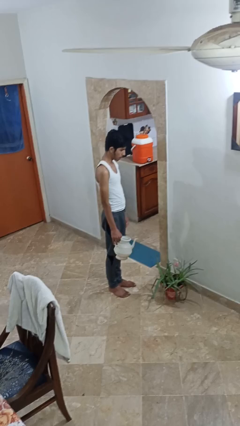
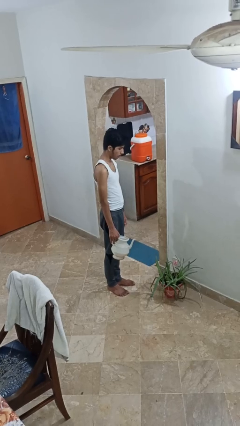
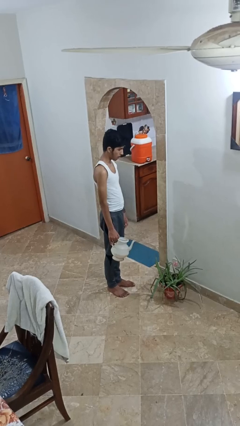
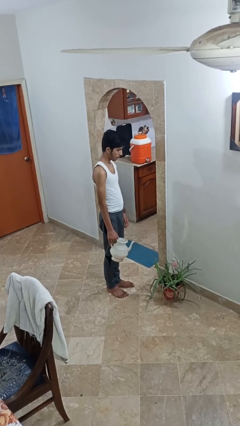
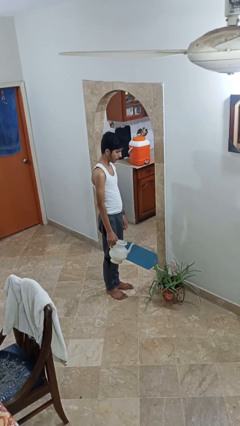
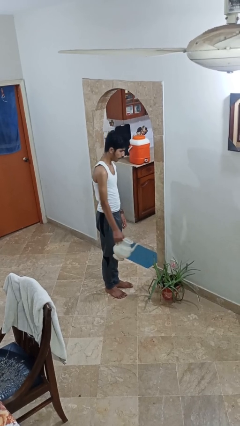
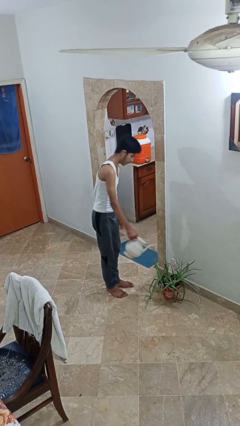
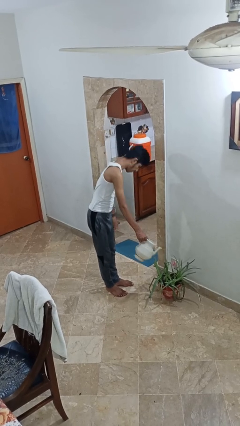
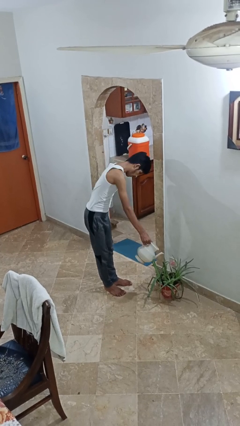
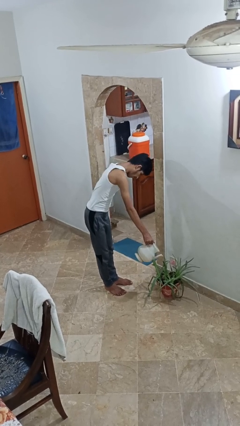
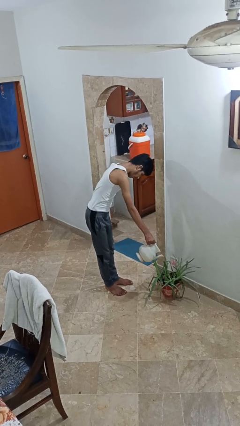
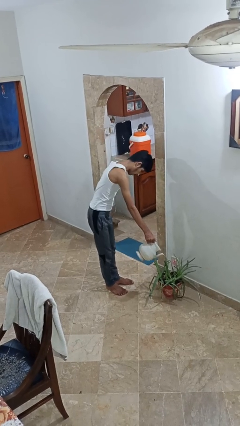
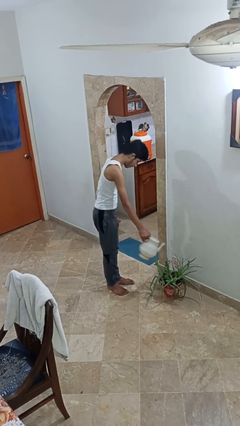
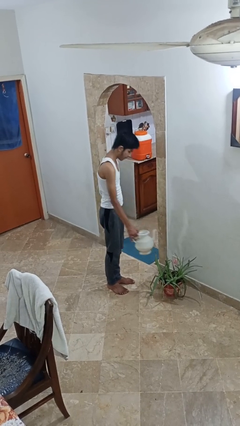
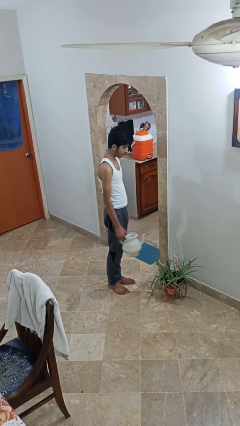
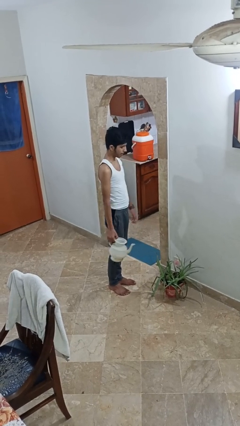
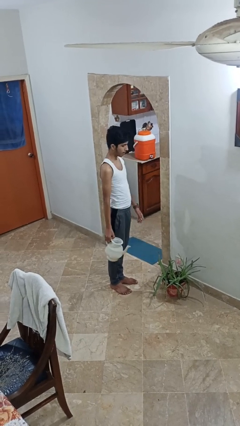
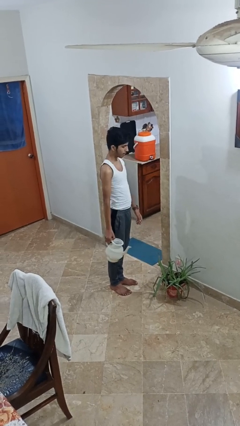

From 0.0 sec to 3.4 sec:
person waters houseplant

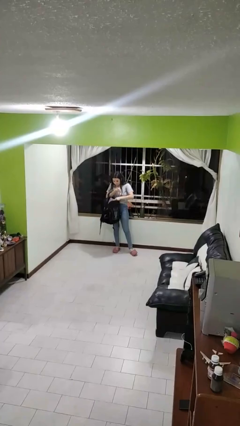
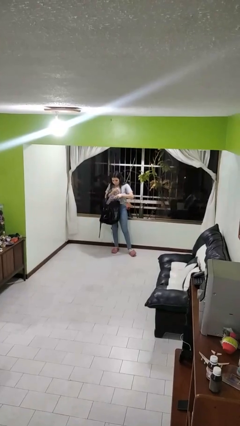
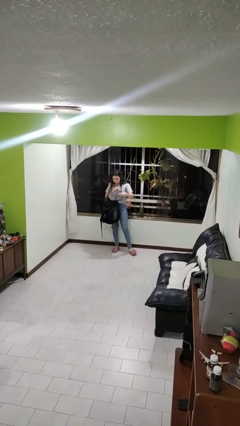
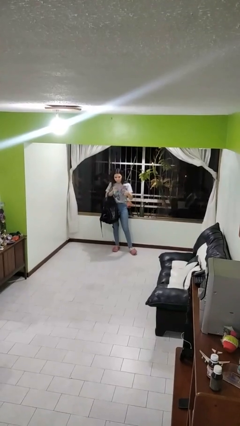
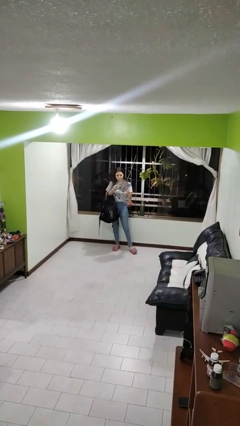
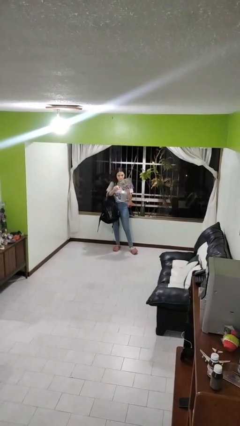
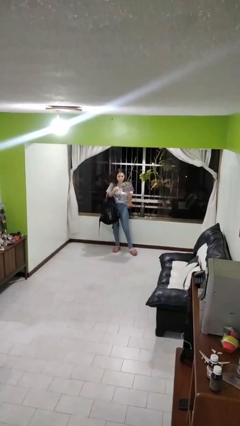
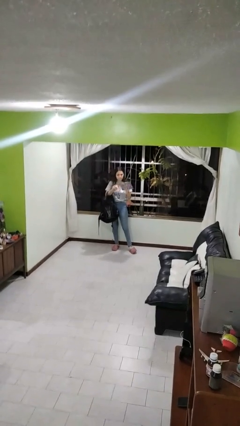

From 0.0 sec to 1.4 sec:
person takes object from backpack

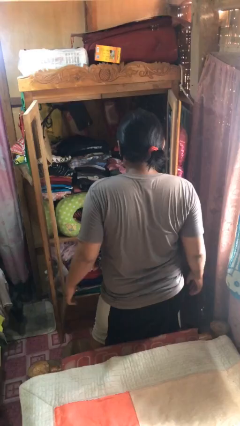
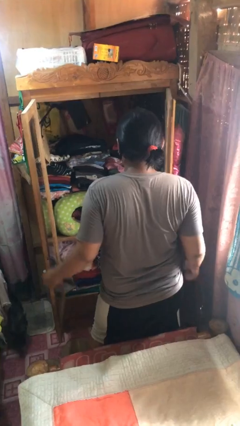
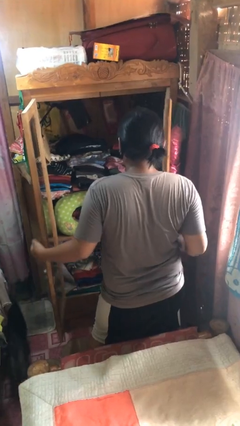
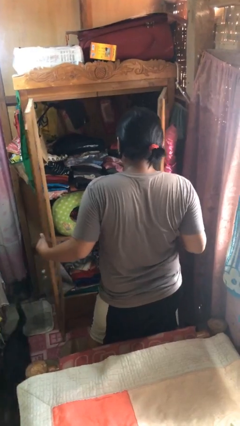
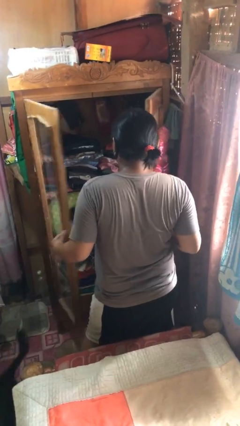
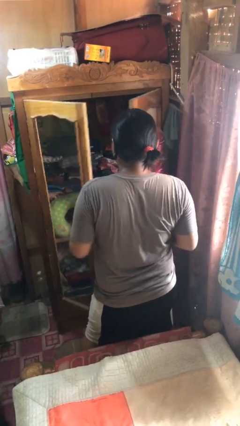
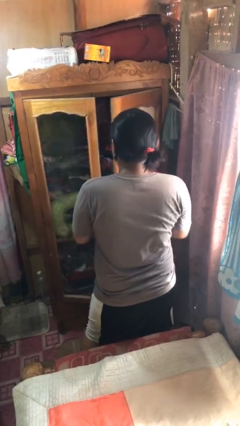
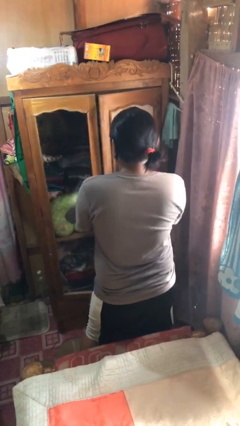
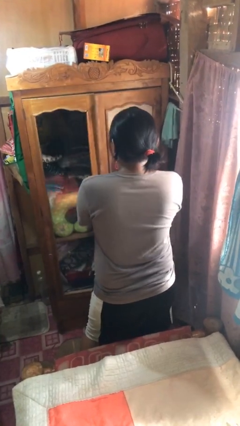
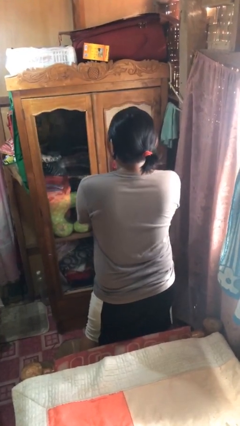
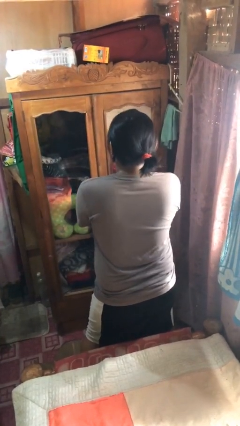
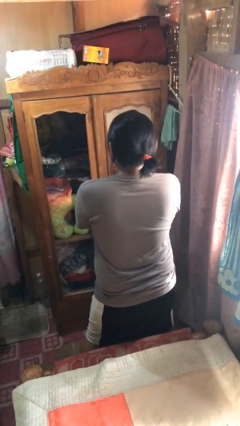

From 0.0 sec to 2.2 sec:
person closes closet door

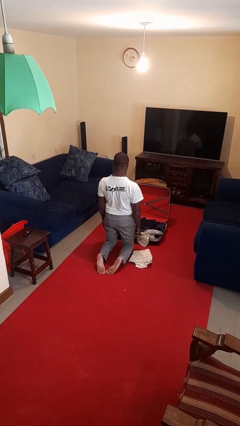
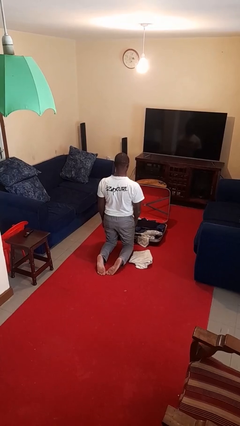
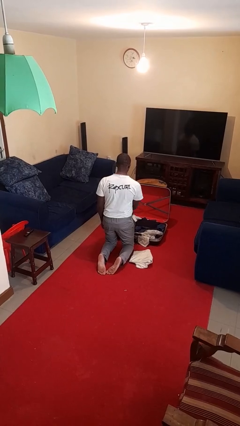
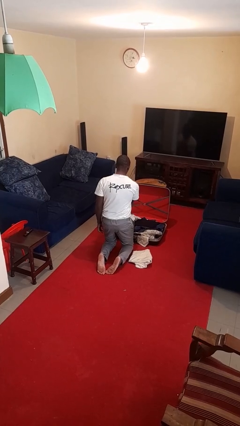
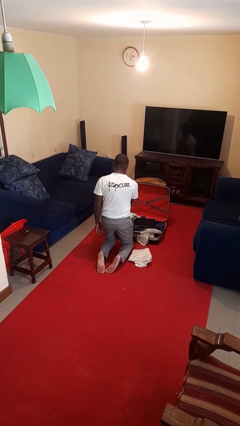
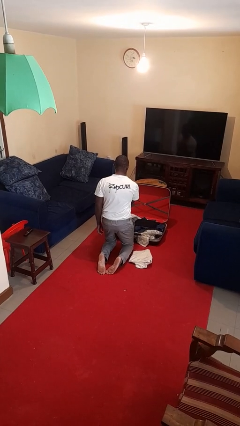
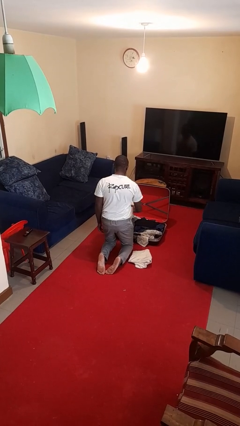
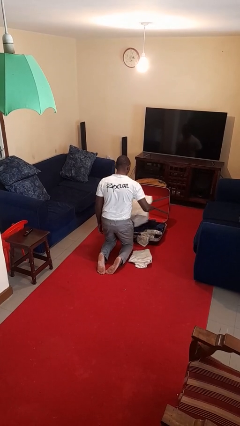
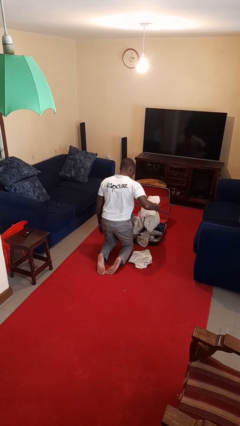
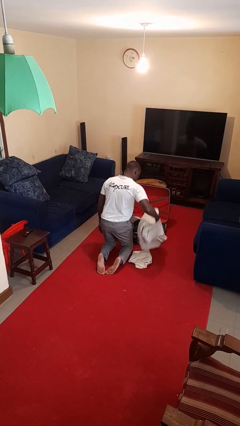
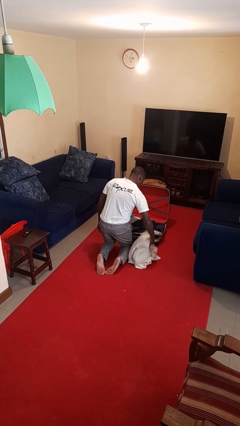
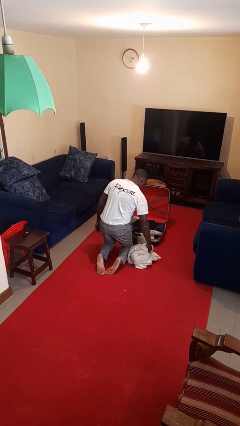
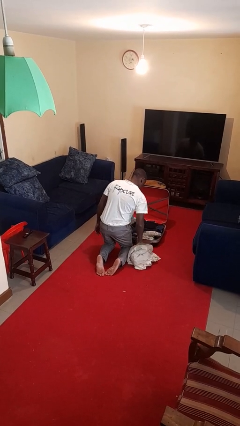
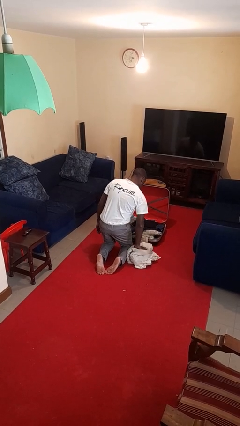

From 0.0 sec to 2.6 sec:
person unloads clothes from suitcase

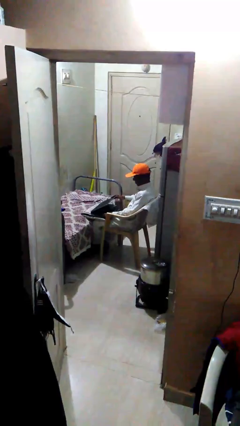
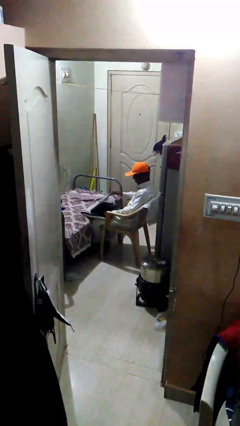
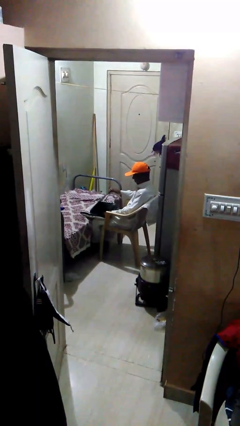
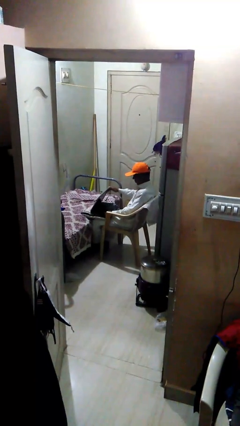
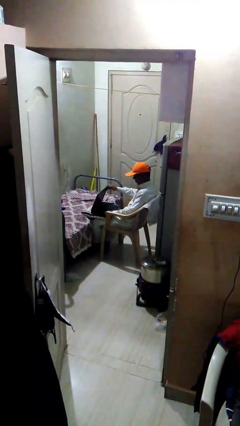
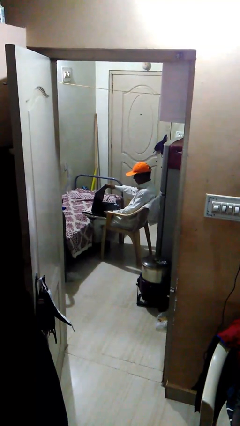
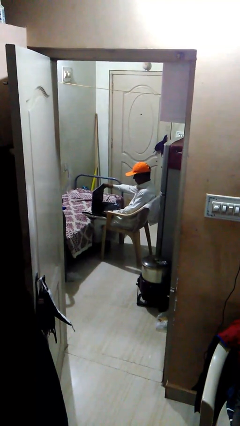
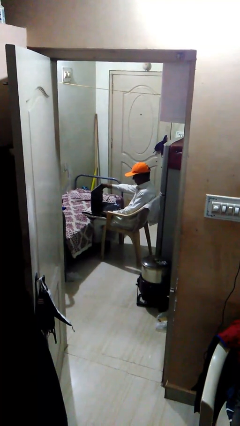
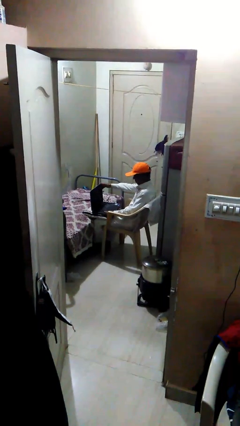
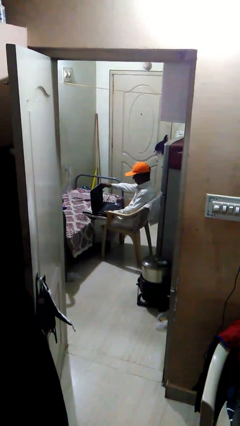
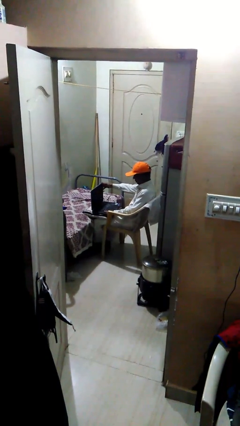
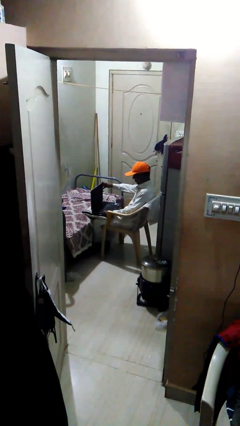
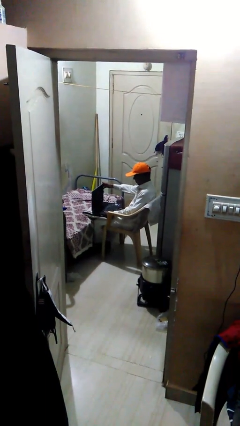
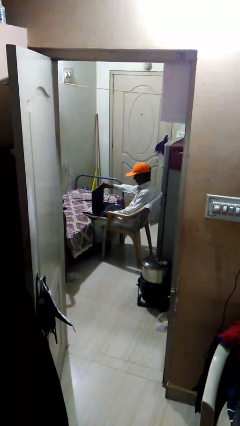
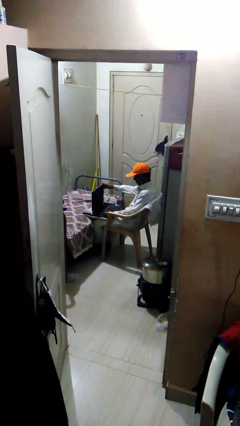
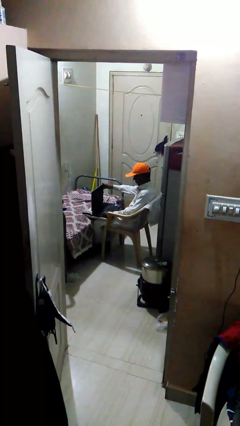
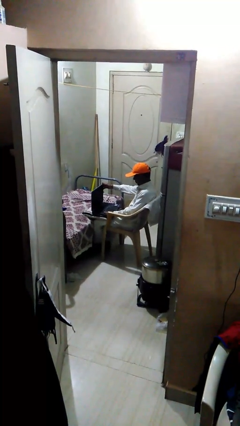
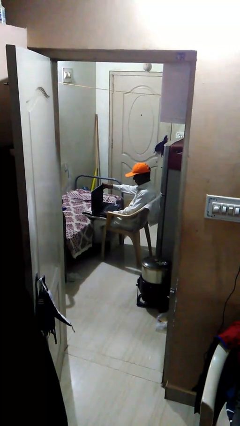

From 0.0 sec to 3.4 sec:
person interacts with laptop

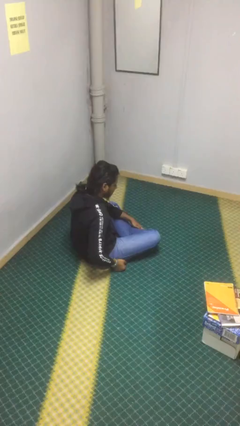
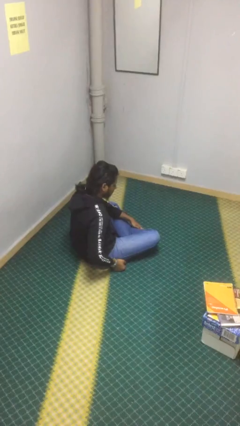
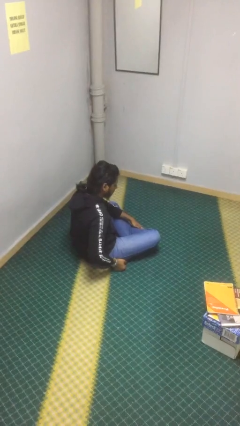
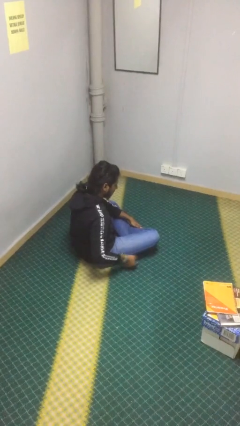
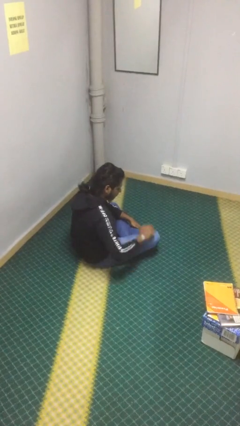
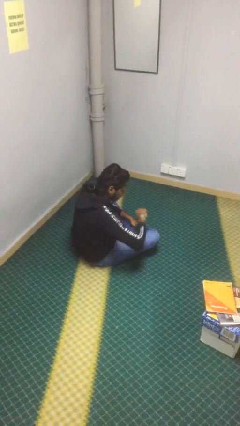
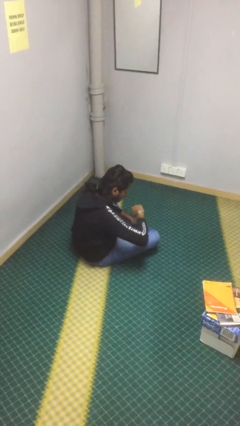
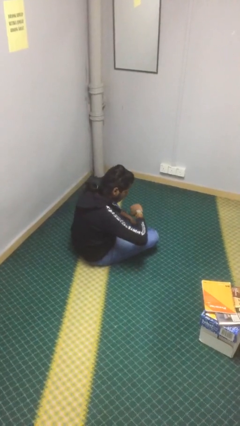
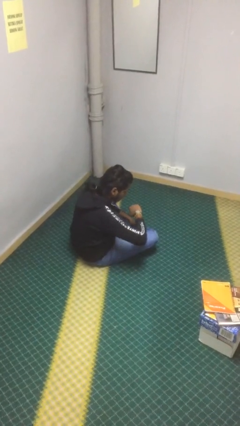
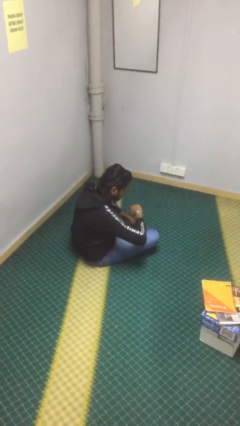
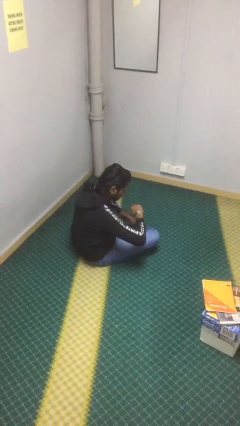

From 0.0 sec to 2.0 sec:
person looks at wristwatch

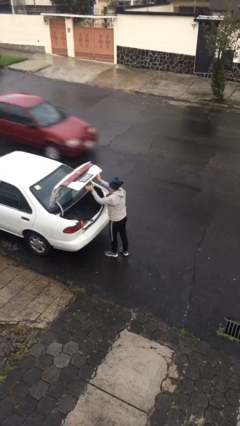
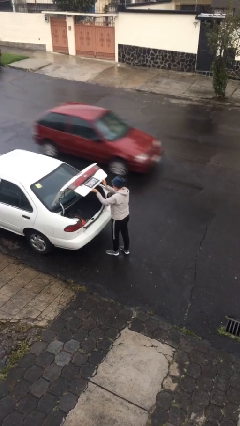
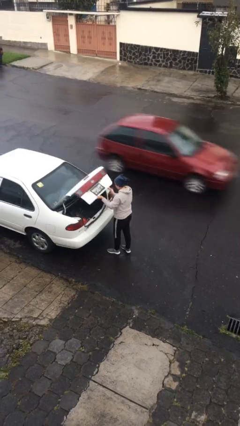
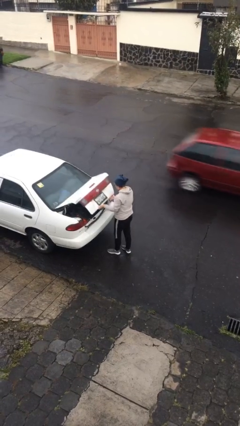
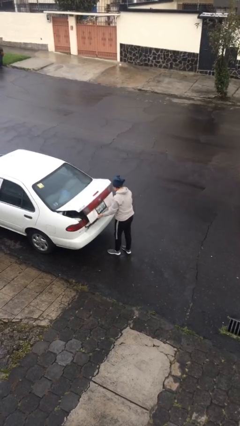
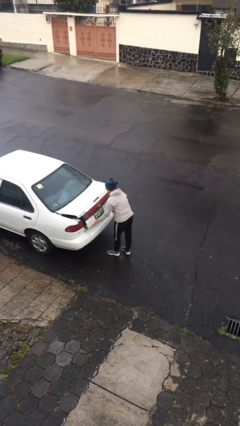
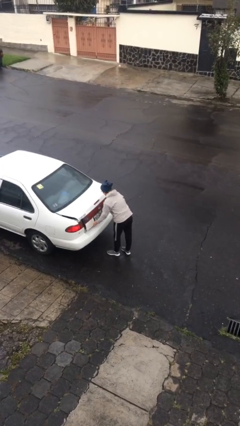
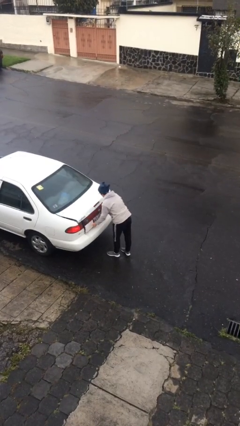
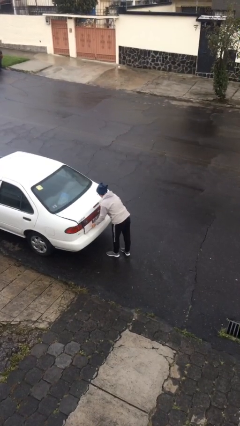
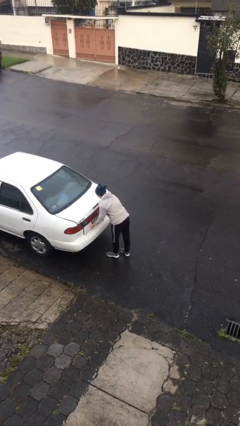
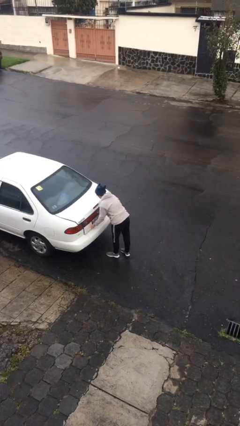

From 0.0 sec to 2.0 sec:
person closes car trunk

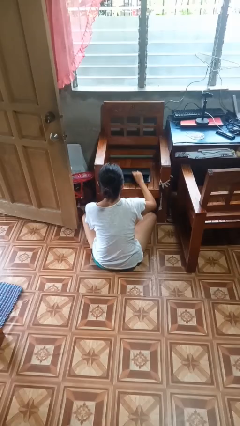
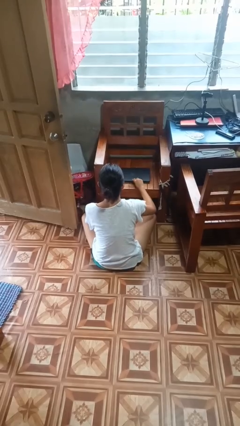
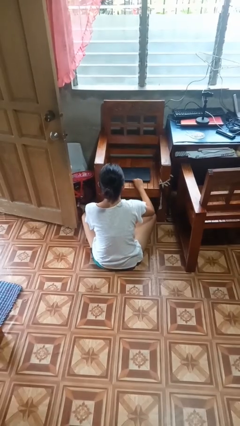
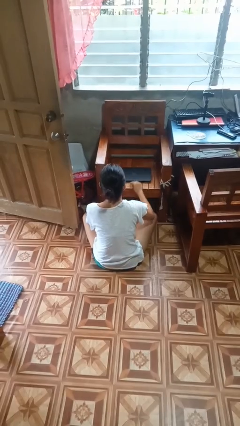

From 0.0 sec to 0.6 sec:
person closes laptop
